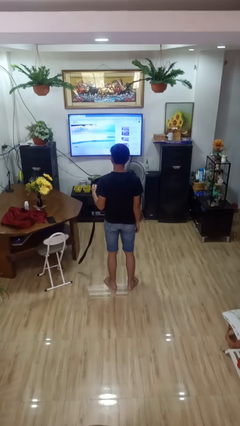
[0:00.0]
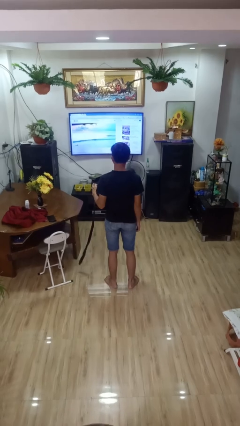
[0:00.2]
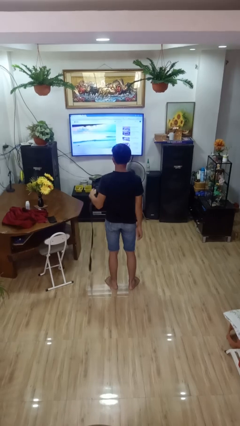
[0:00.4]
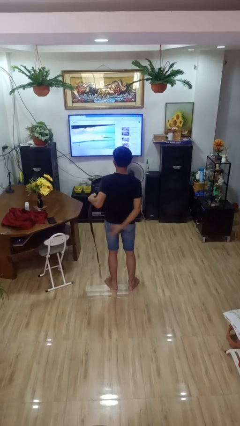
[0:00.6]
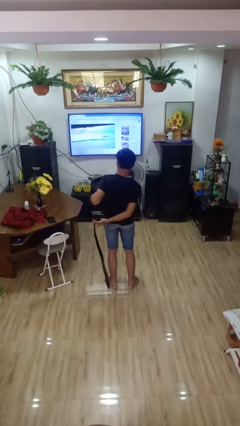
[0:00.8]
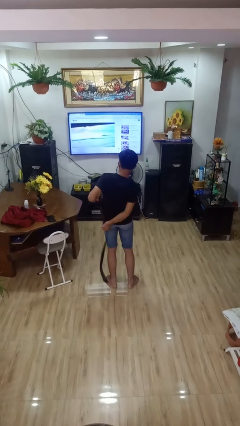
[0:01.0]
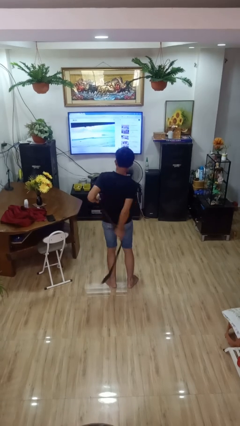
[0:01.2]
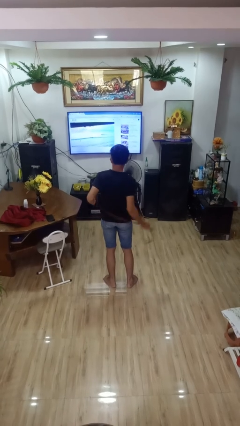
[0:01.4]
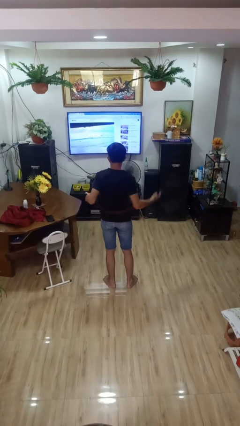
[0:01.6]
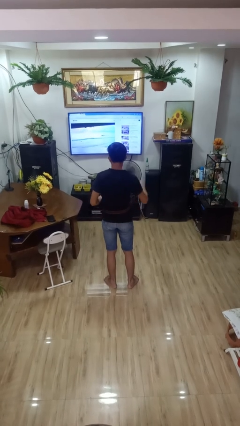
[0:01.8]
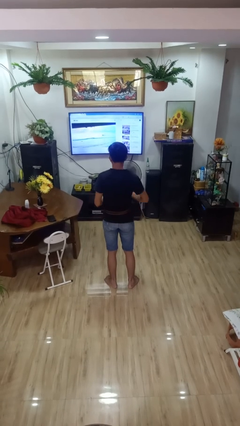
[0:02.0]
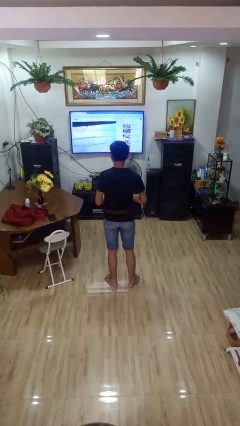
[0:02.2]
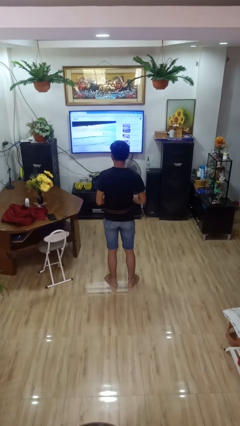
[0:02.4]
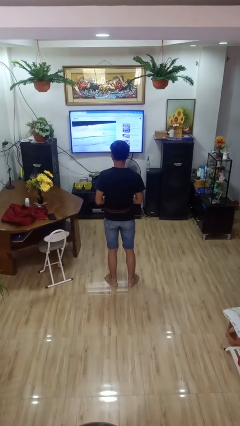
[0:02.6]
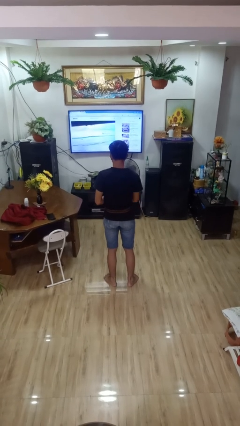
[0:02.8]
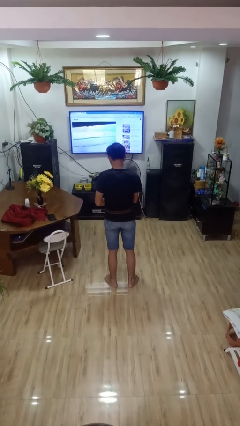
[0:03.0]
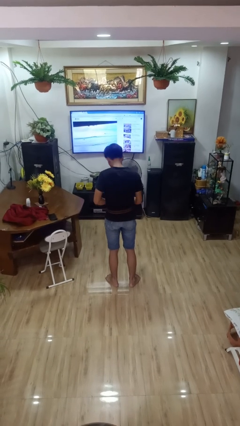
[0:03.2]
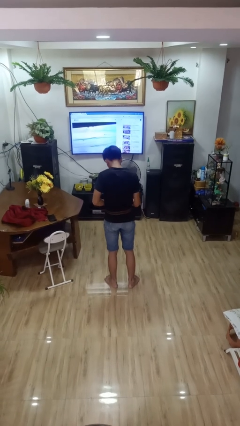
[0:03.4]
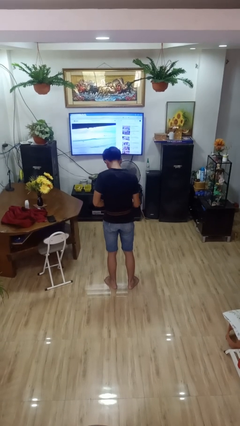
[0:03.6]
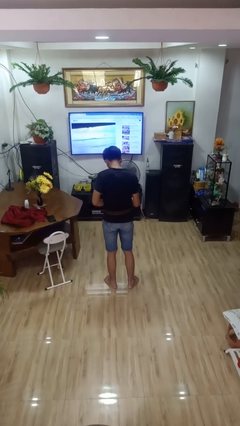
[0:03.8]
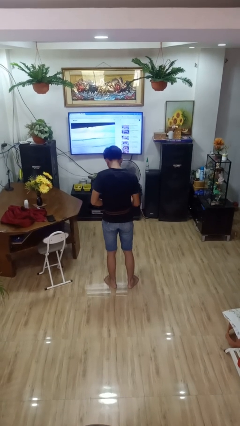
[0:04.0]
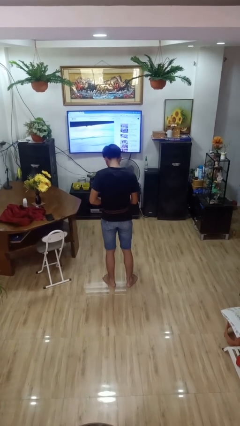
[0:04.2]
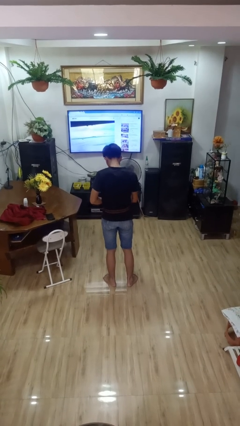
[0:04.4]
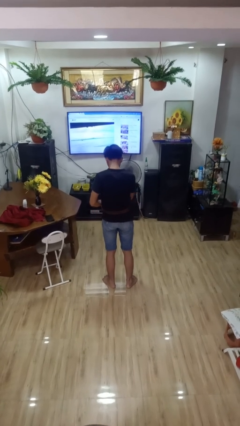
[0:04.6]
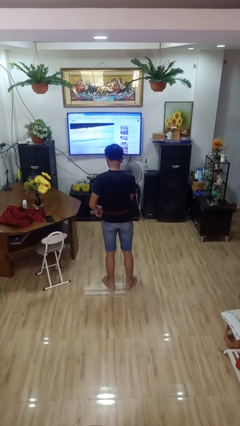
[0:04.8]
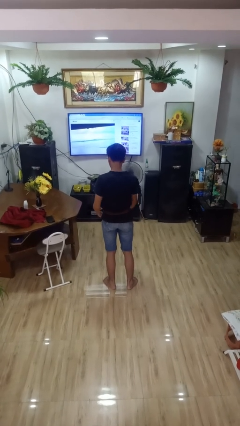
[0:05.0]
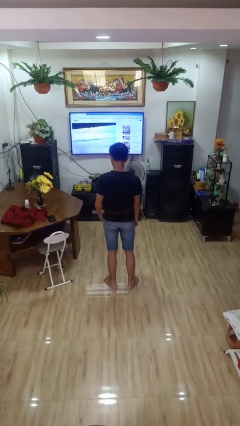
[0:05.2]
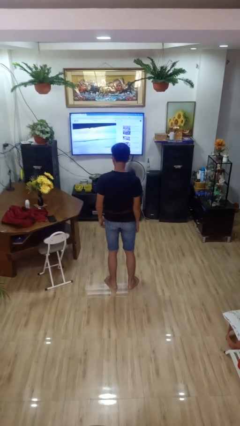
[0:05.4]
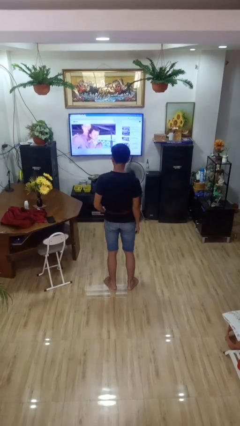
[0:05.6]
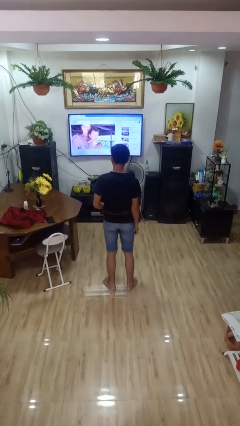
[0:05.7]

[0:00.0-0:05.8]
person puts on belt

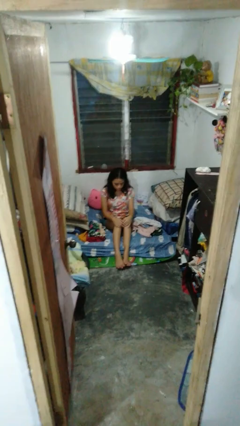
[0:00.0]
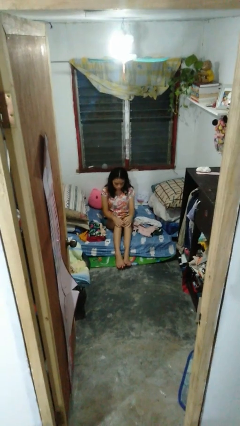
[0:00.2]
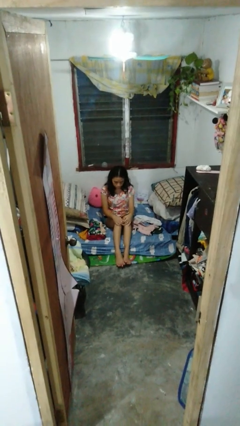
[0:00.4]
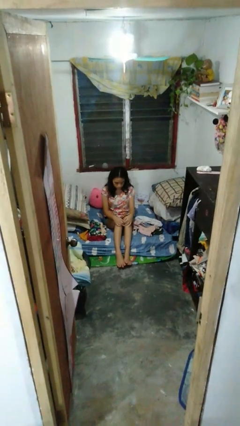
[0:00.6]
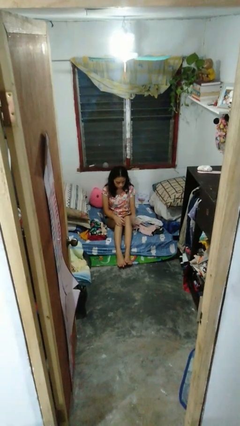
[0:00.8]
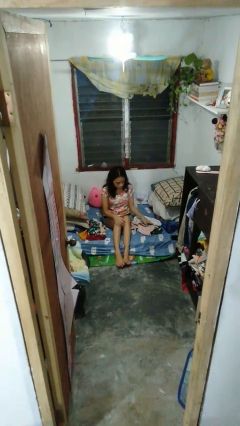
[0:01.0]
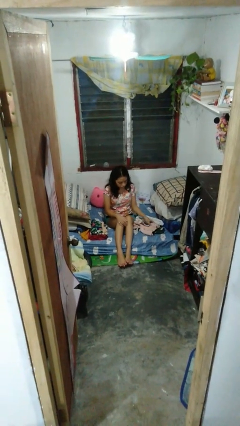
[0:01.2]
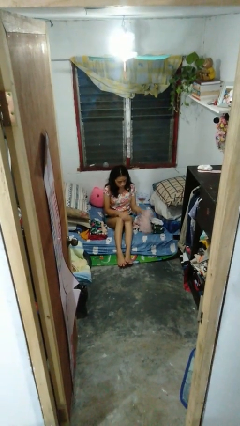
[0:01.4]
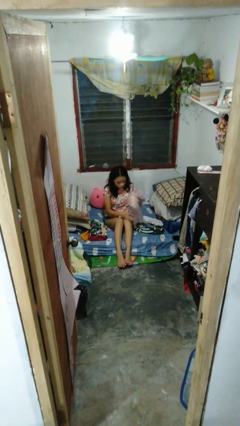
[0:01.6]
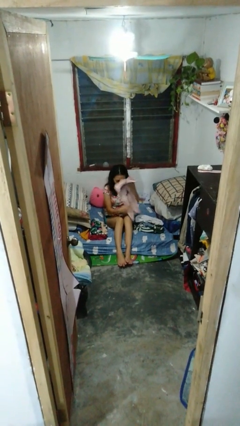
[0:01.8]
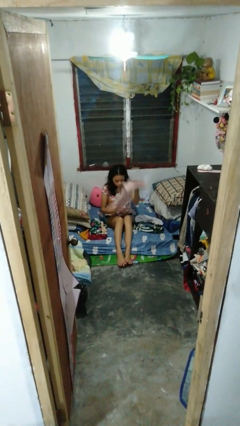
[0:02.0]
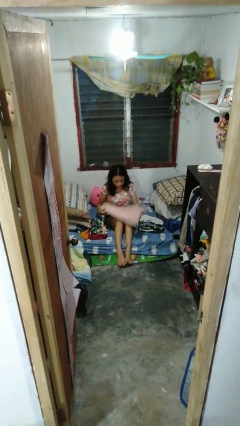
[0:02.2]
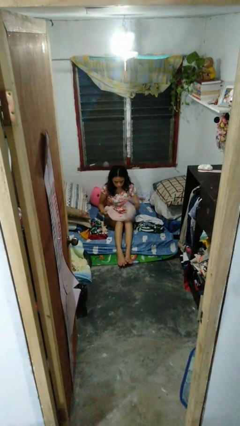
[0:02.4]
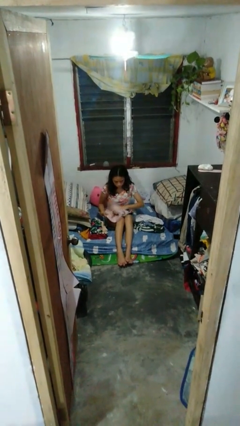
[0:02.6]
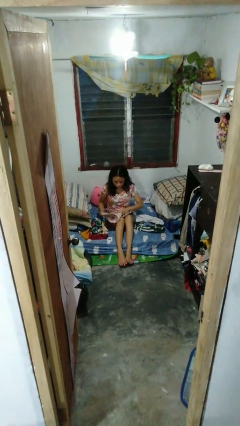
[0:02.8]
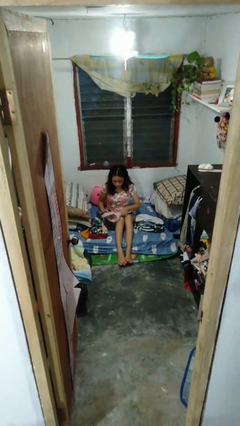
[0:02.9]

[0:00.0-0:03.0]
person folds shirt

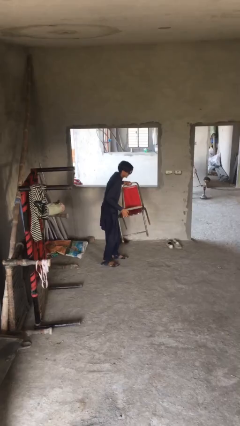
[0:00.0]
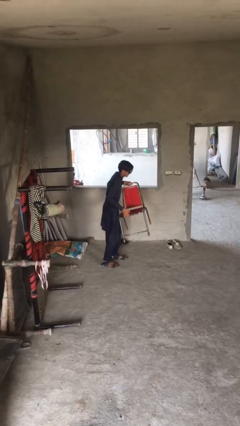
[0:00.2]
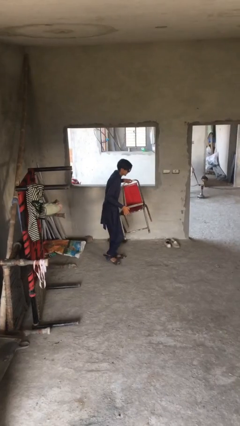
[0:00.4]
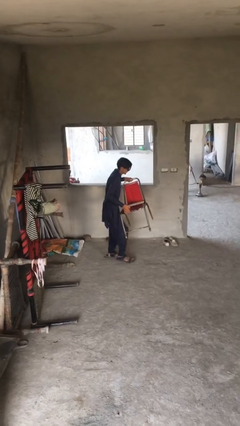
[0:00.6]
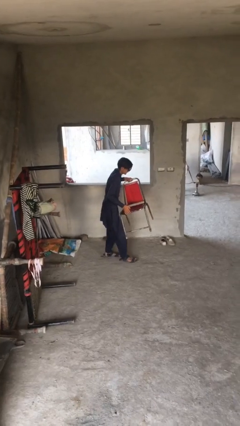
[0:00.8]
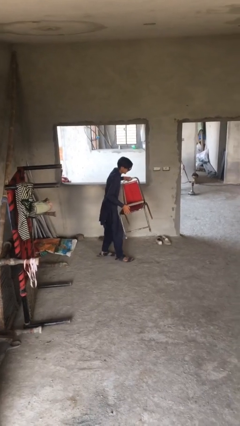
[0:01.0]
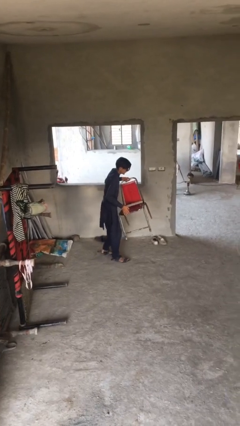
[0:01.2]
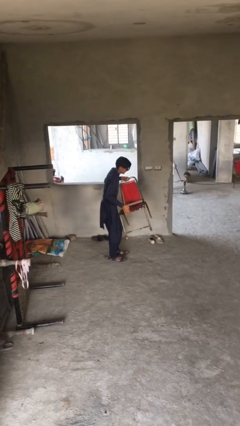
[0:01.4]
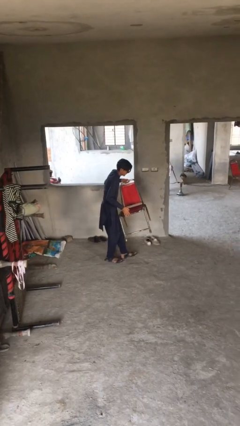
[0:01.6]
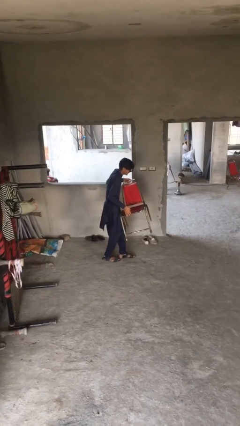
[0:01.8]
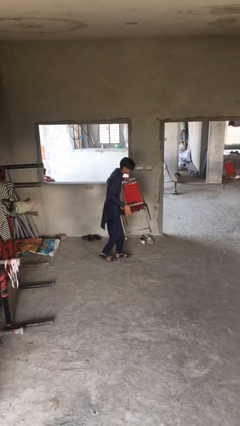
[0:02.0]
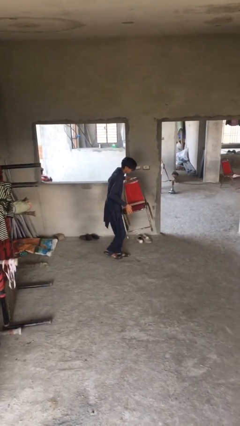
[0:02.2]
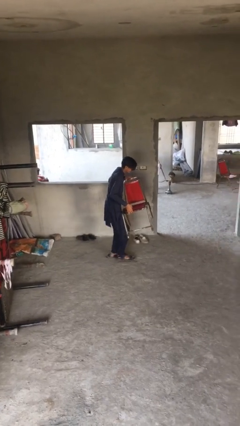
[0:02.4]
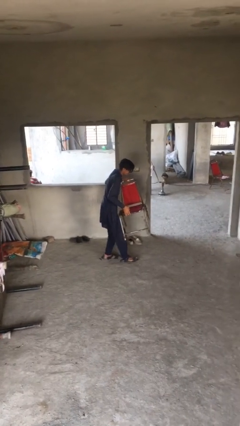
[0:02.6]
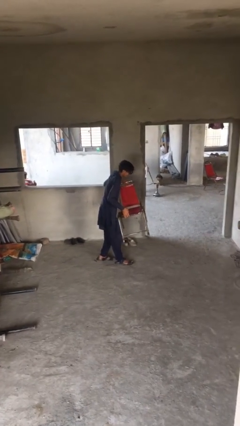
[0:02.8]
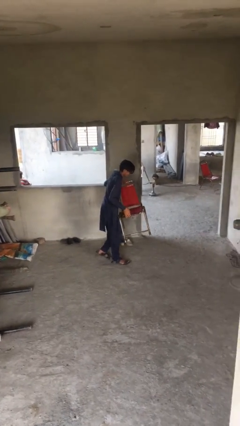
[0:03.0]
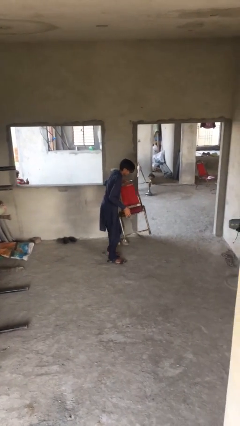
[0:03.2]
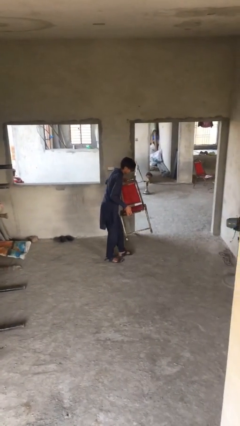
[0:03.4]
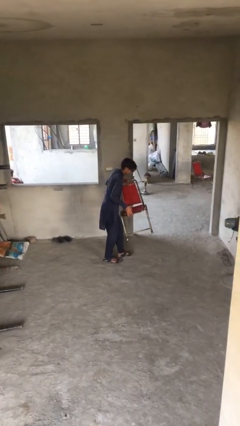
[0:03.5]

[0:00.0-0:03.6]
person carries heavy object

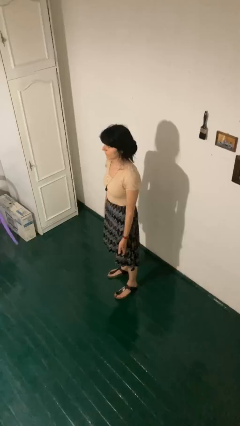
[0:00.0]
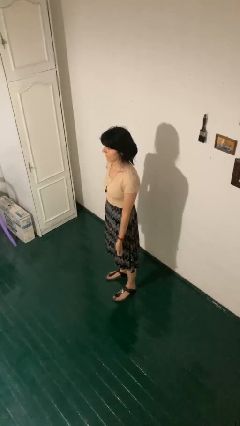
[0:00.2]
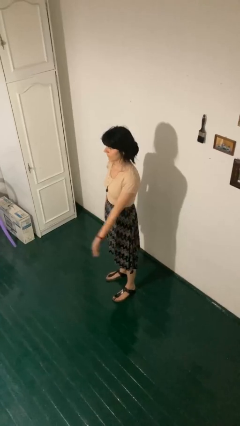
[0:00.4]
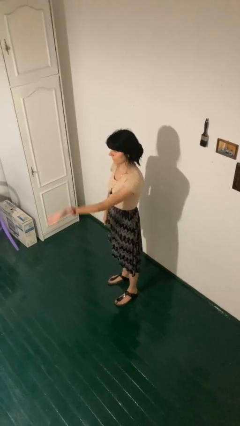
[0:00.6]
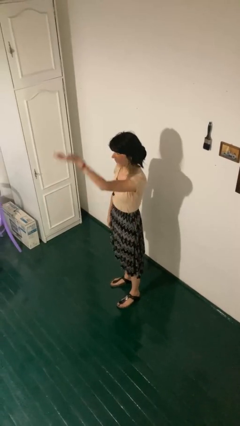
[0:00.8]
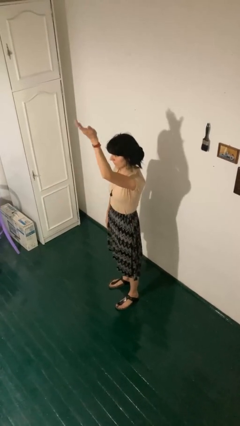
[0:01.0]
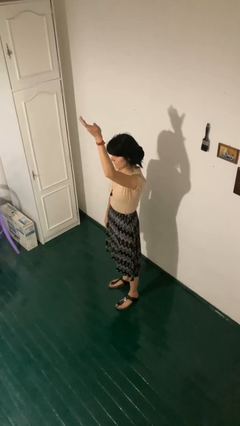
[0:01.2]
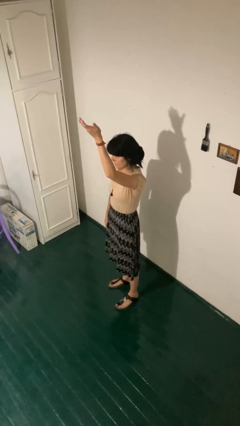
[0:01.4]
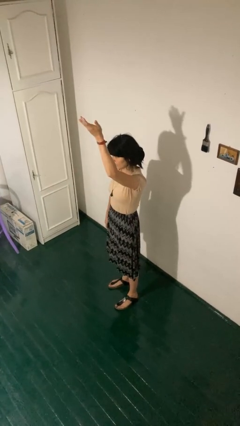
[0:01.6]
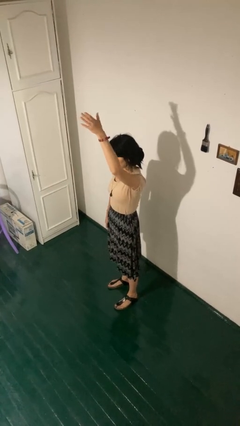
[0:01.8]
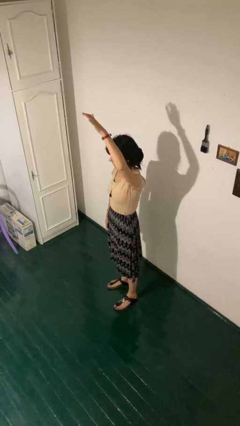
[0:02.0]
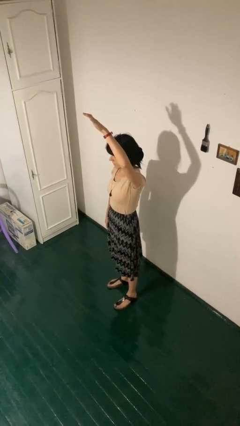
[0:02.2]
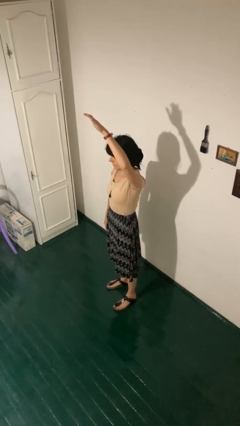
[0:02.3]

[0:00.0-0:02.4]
person gestures swipe up

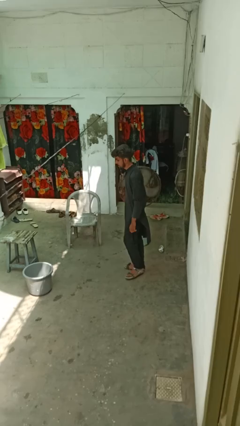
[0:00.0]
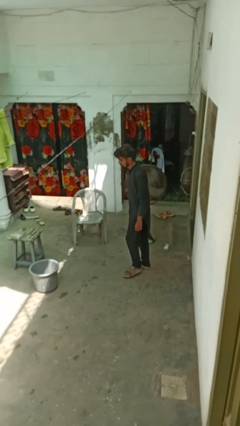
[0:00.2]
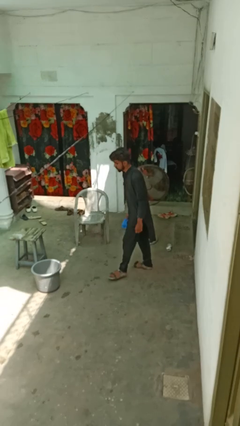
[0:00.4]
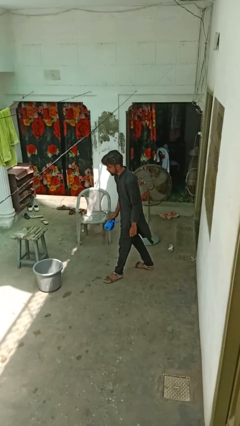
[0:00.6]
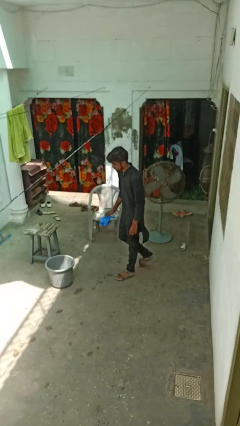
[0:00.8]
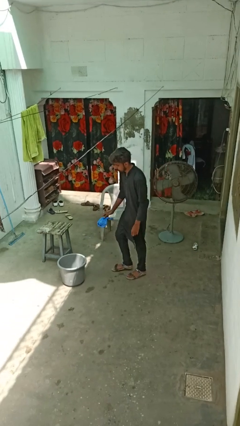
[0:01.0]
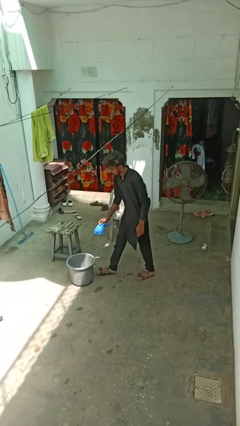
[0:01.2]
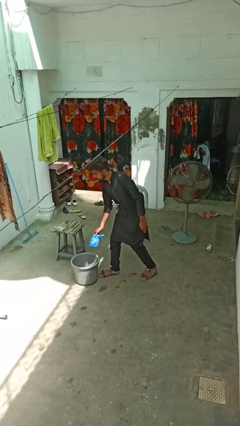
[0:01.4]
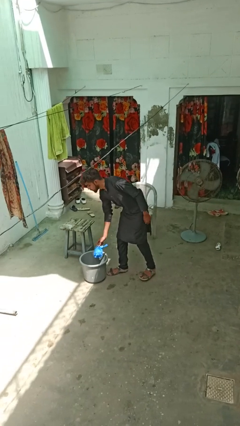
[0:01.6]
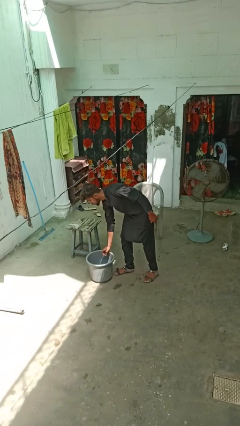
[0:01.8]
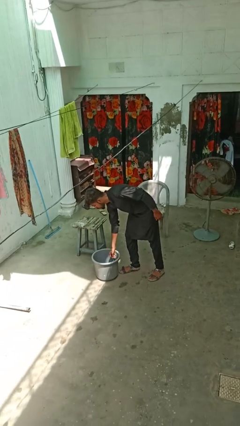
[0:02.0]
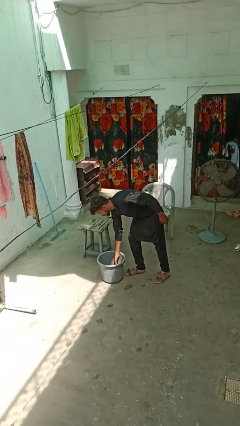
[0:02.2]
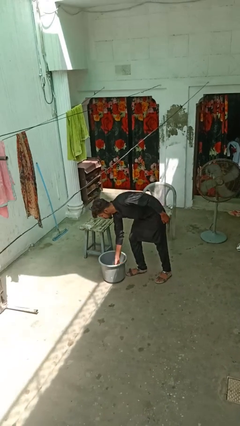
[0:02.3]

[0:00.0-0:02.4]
person discards trash

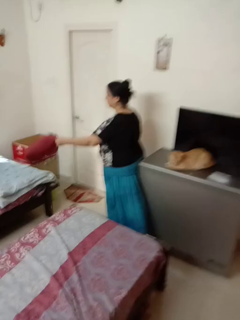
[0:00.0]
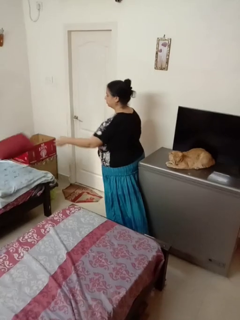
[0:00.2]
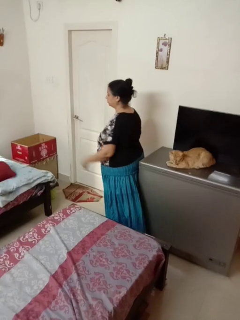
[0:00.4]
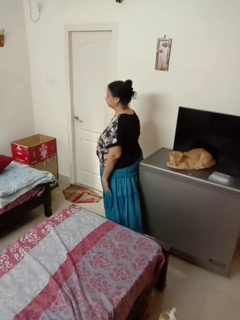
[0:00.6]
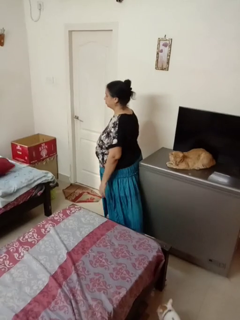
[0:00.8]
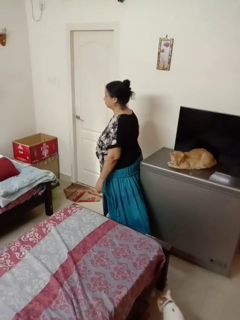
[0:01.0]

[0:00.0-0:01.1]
person throws object on bed
